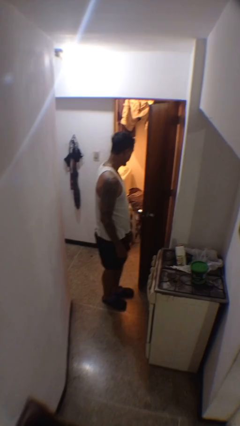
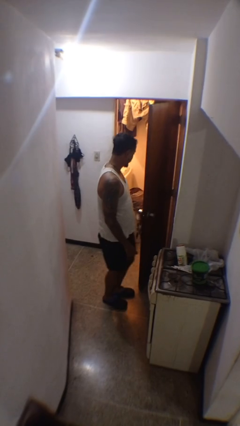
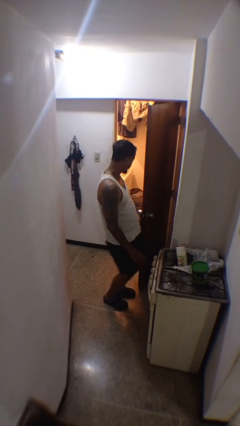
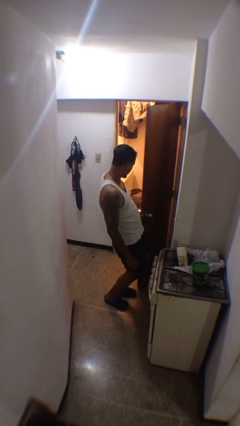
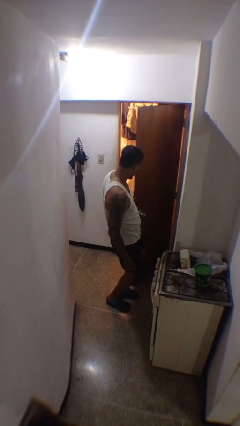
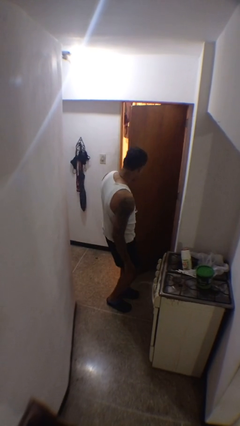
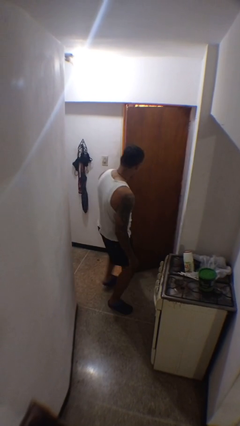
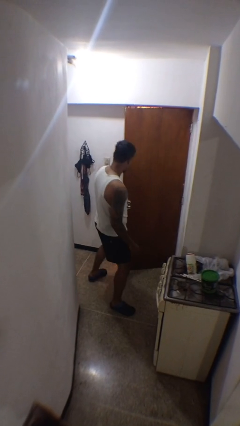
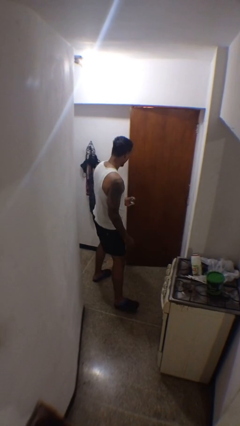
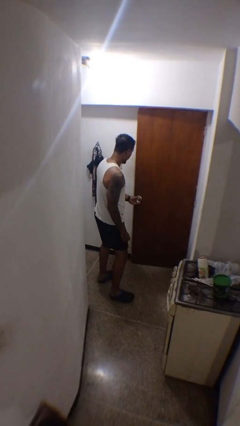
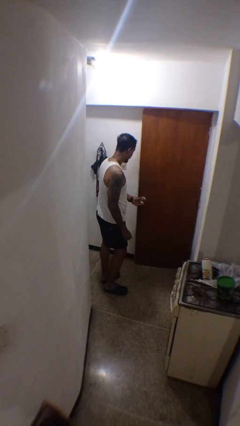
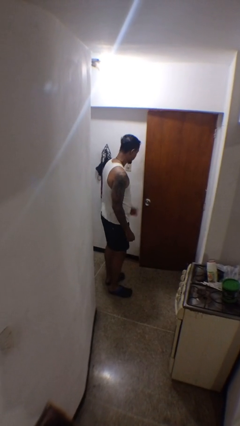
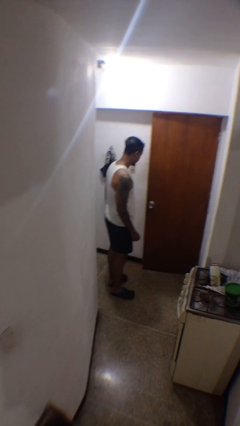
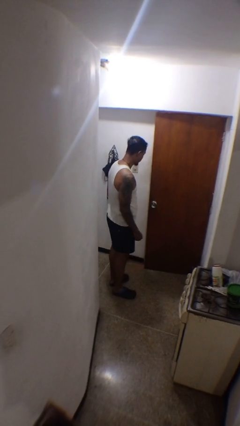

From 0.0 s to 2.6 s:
person closes door with hip

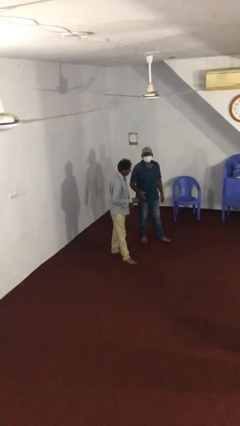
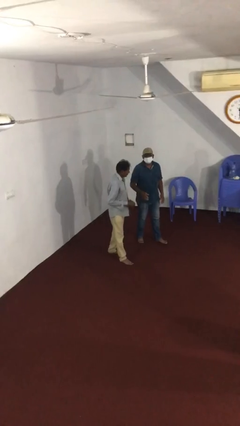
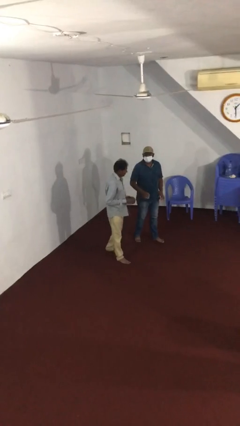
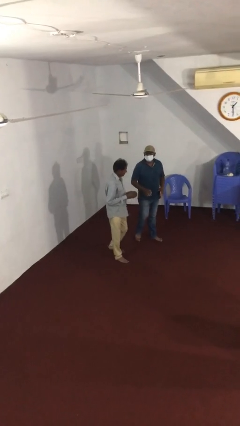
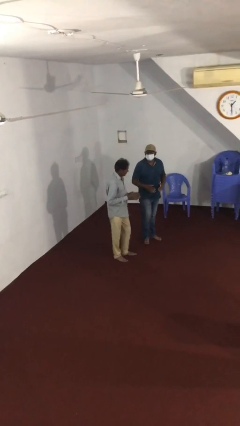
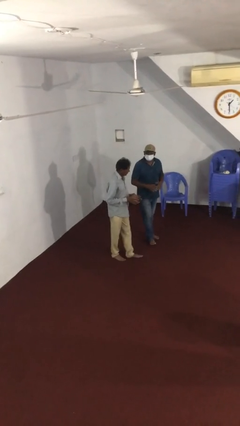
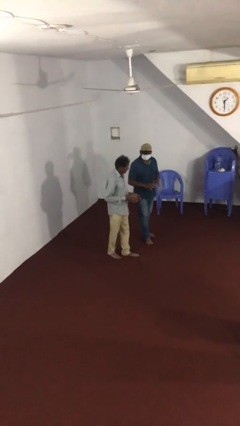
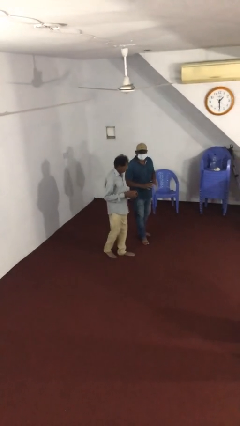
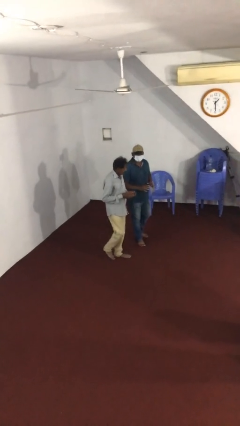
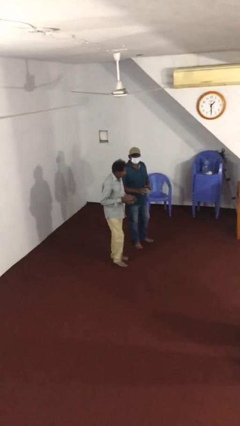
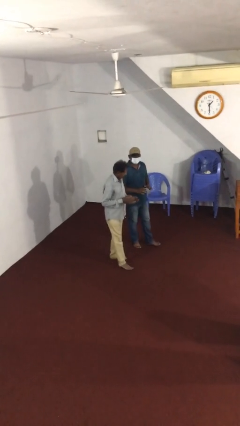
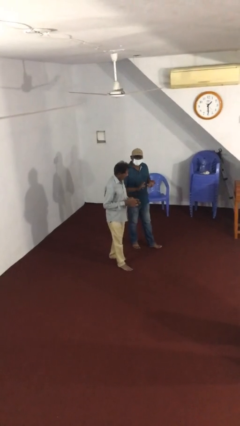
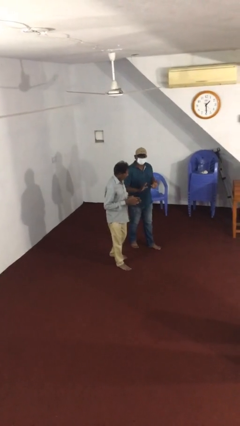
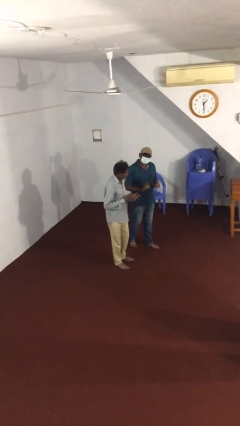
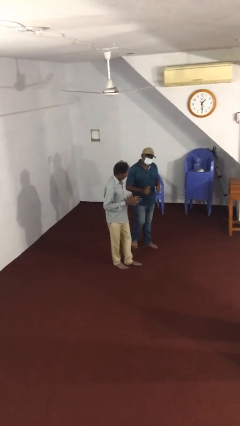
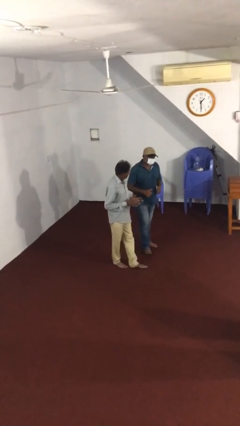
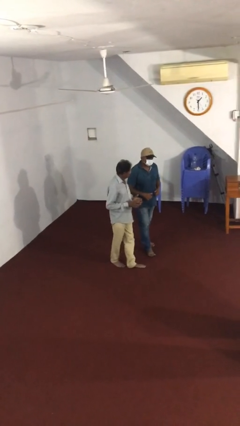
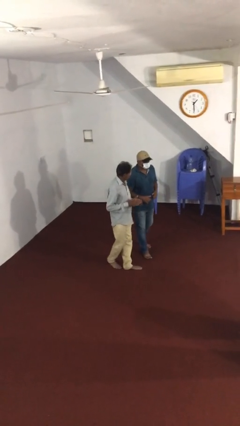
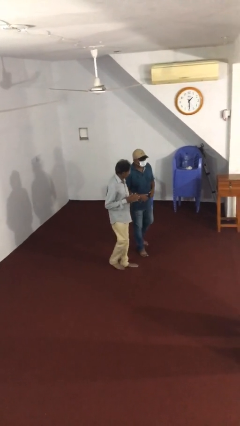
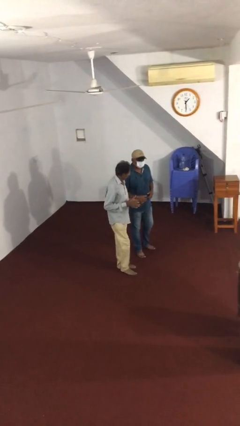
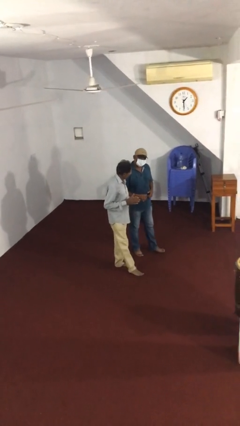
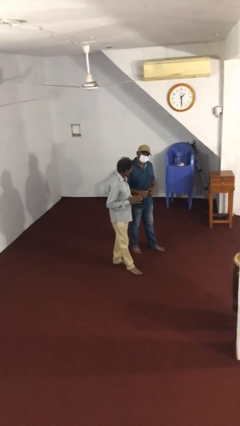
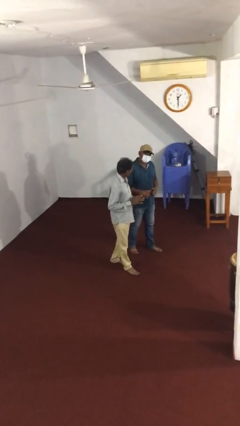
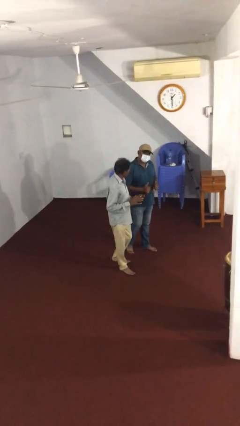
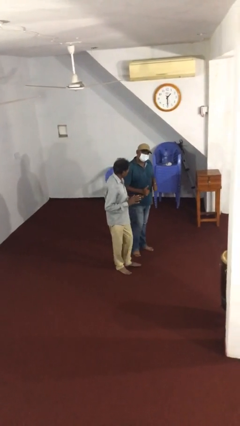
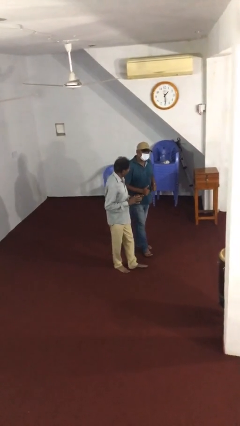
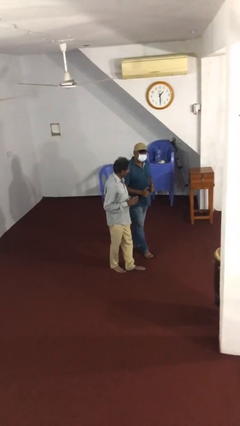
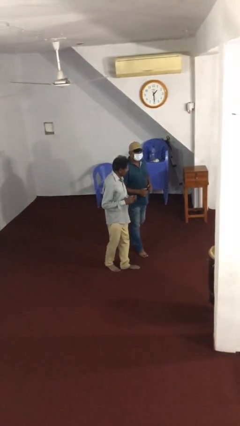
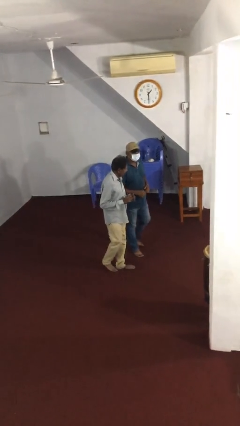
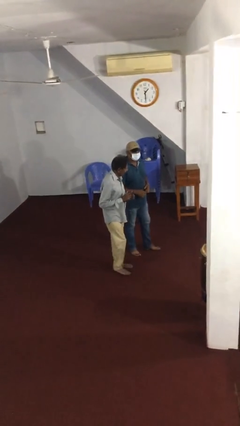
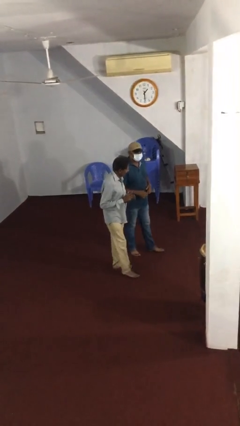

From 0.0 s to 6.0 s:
person talks to person

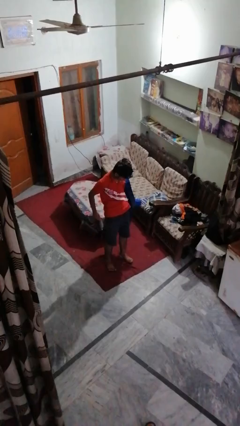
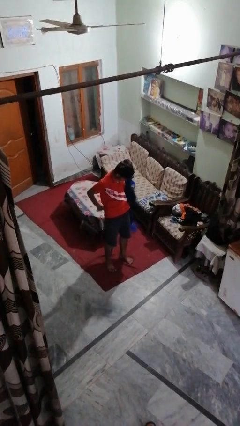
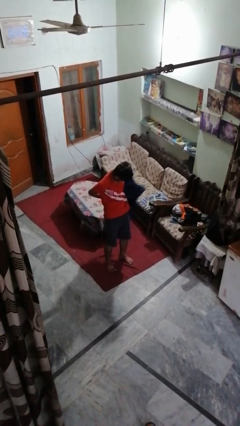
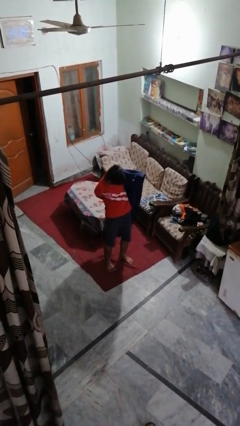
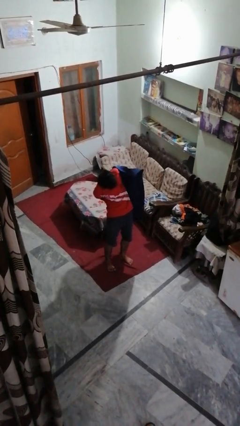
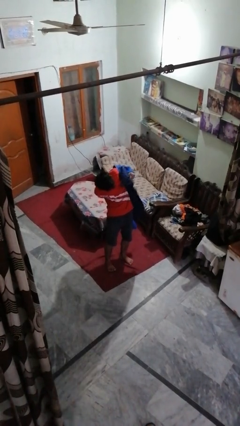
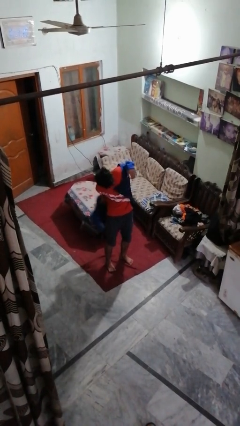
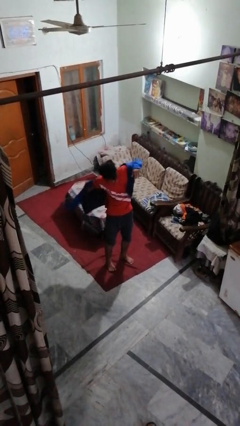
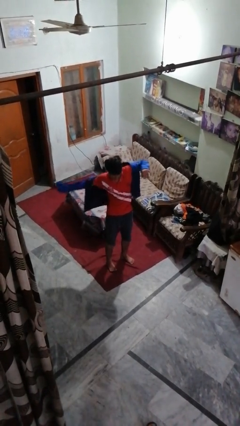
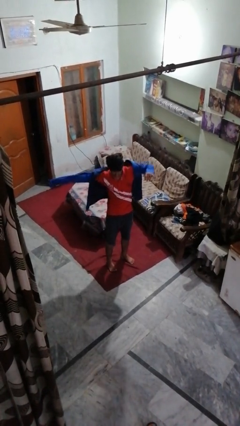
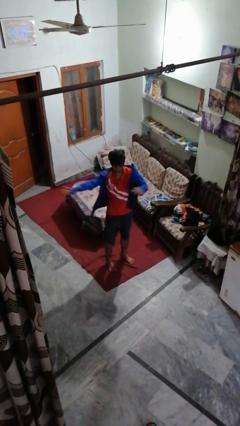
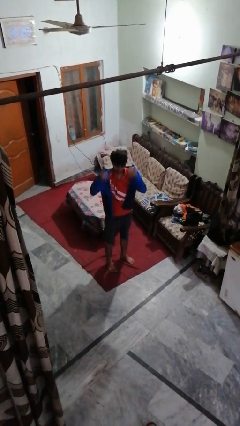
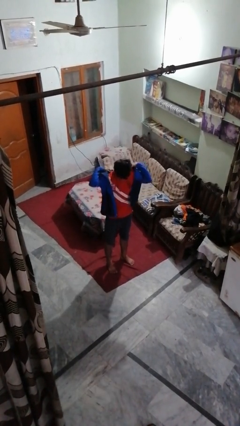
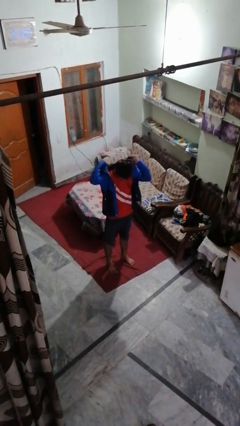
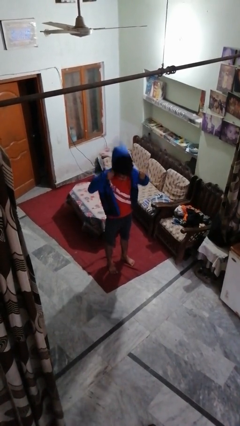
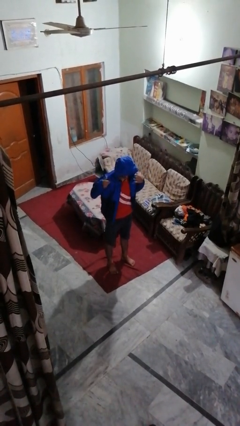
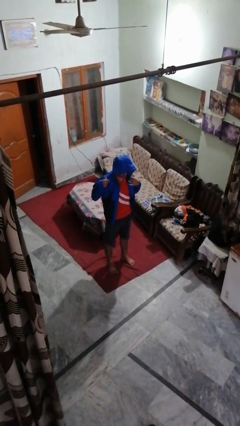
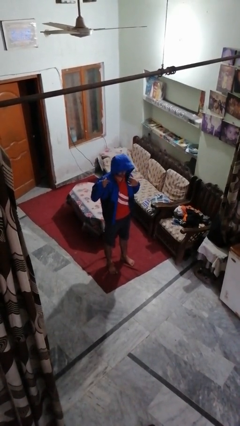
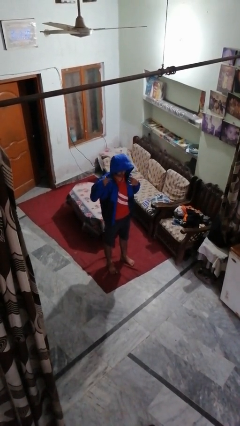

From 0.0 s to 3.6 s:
person puts on hoodie

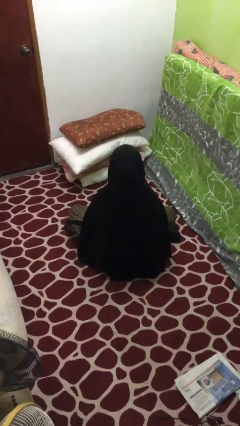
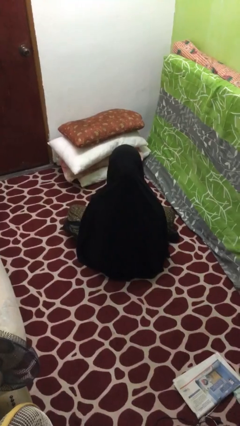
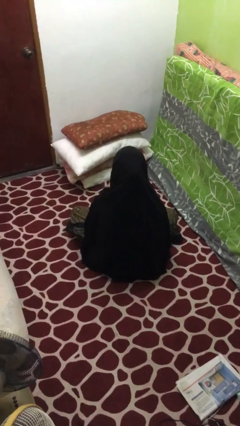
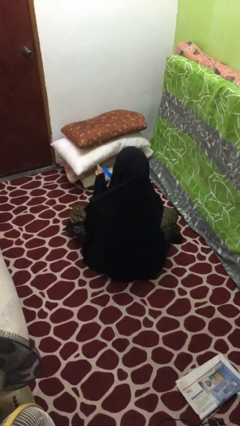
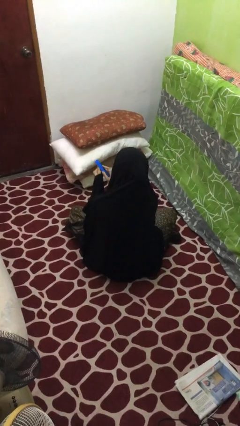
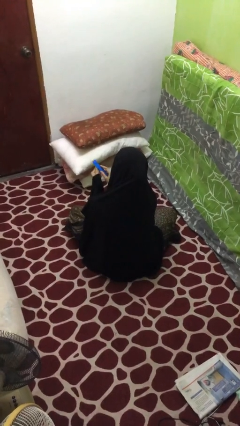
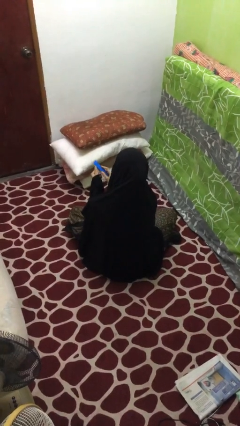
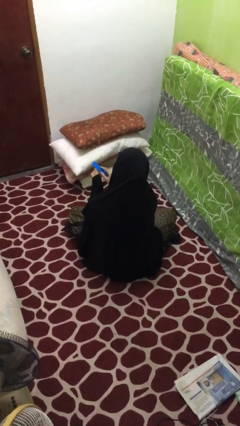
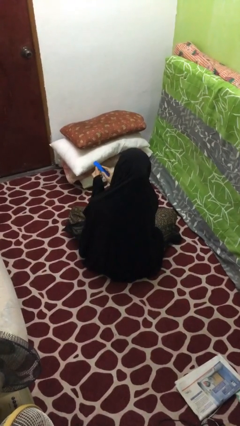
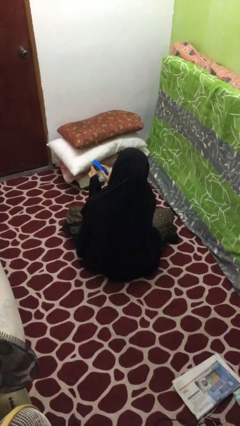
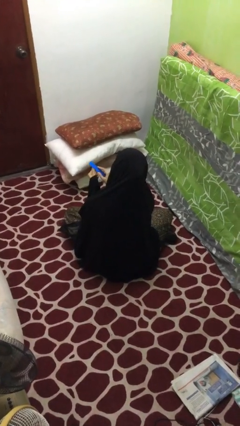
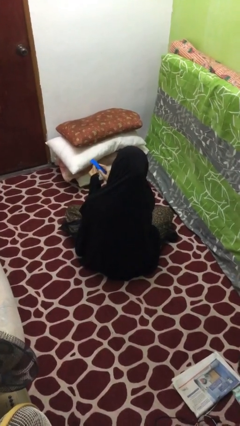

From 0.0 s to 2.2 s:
person files fingernails

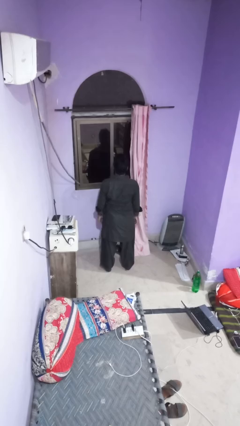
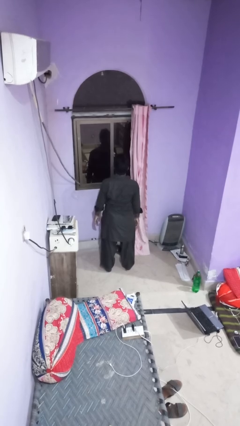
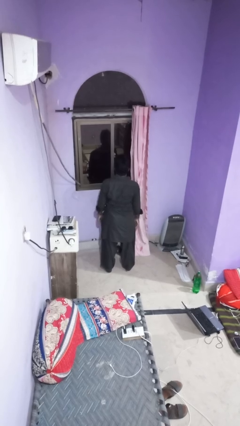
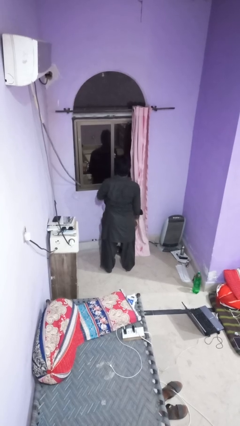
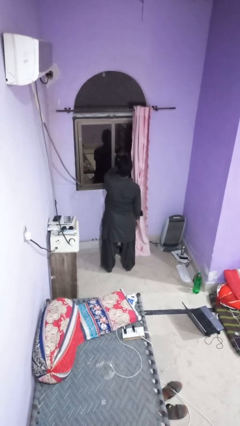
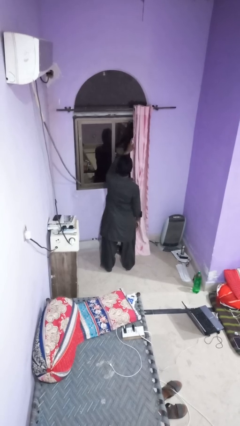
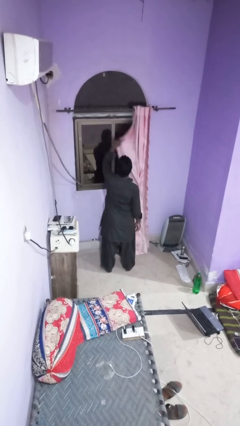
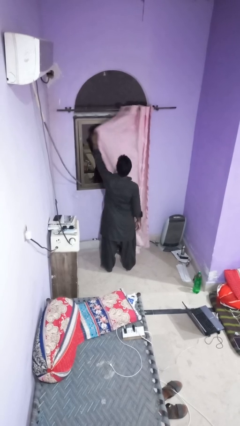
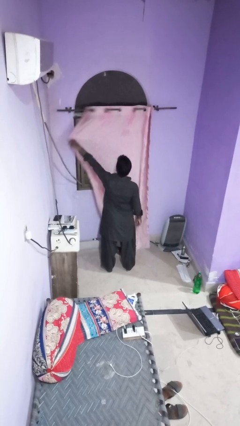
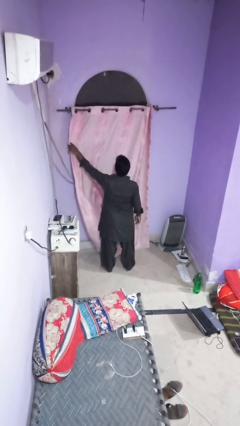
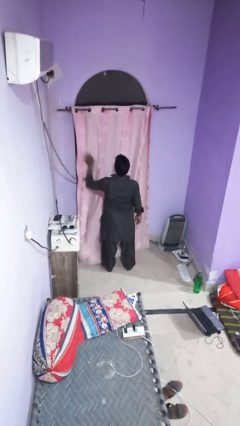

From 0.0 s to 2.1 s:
person closes curtains

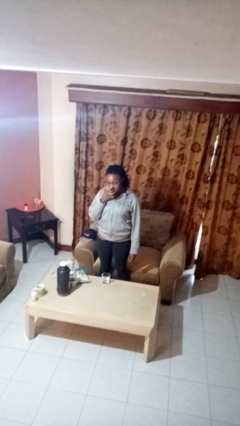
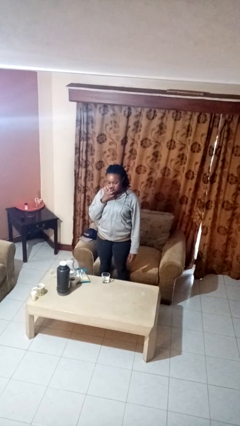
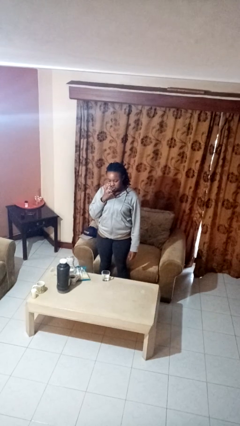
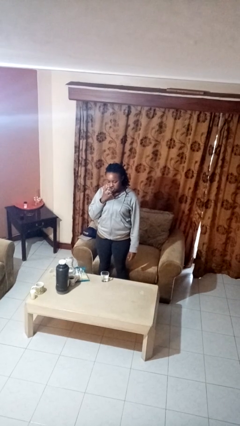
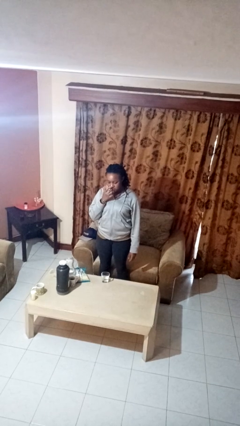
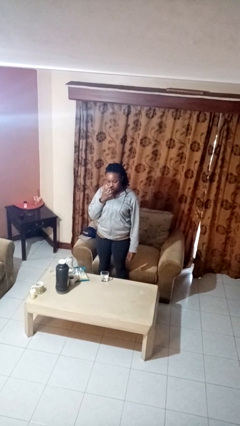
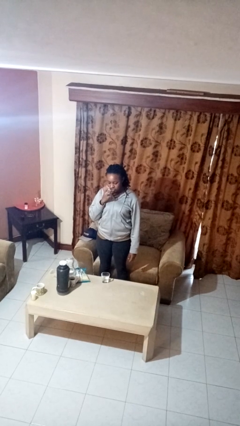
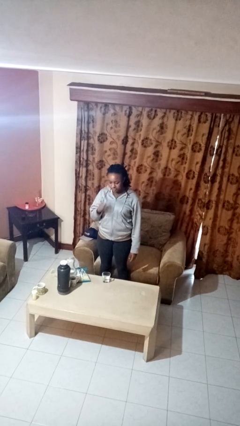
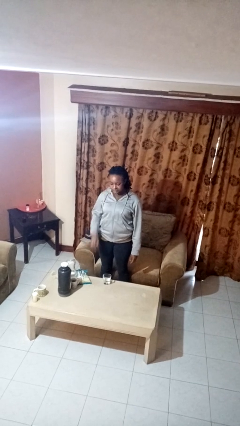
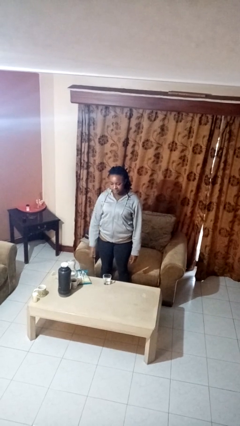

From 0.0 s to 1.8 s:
person licks fingers
